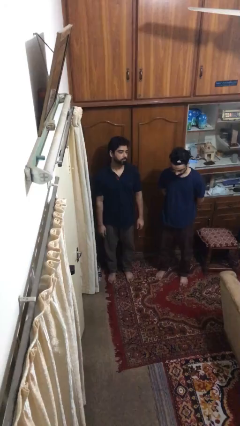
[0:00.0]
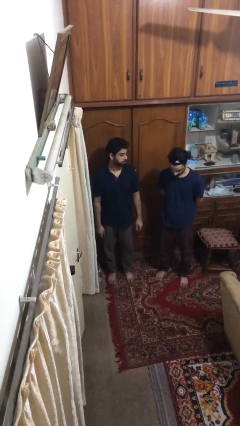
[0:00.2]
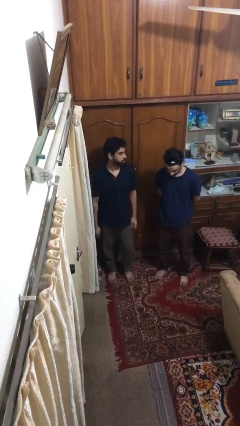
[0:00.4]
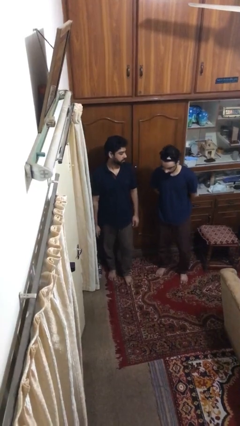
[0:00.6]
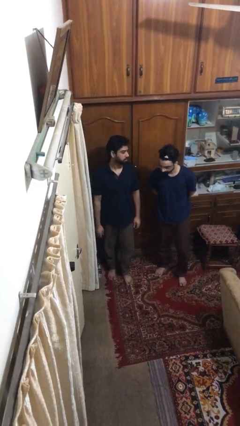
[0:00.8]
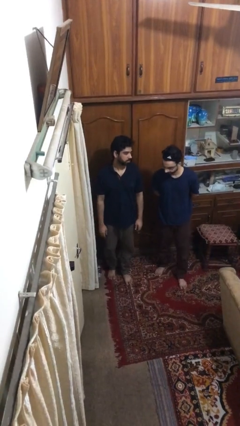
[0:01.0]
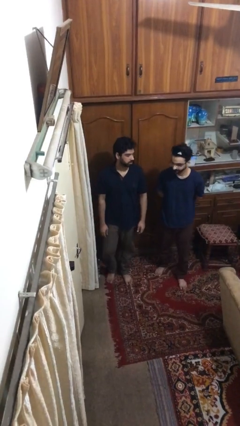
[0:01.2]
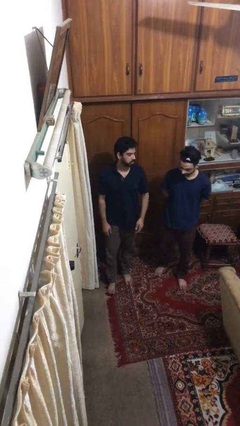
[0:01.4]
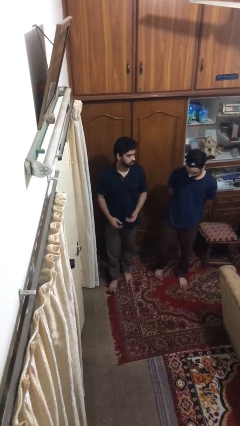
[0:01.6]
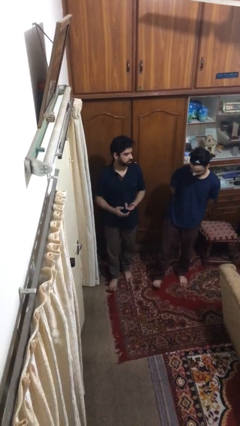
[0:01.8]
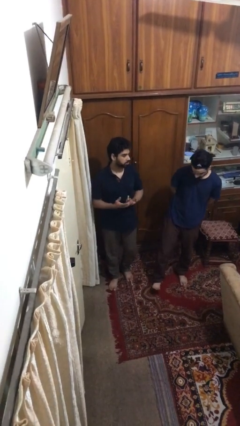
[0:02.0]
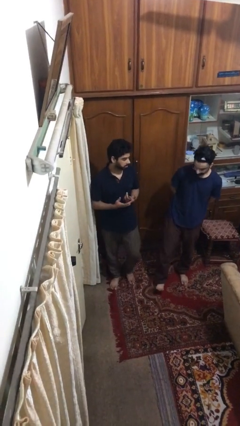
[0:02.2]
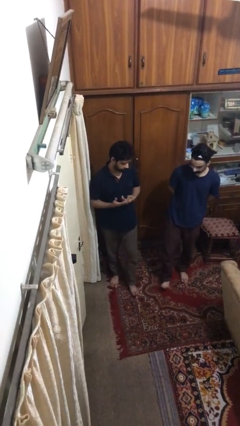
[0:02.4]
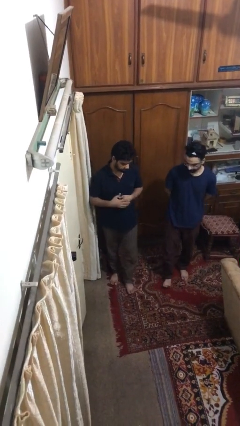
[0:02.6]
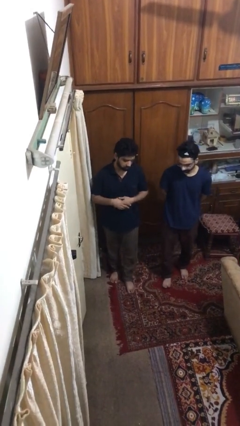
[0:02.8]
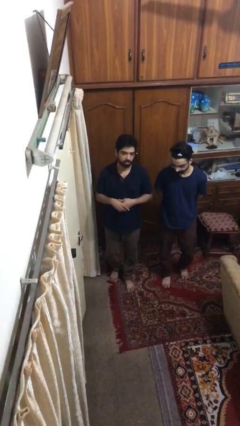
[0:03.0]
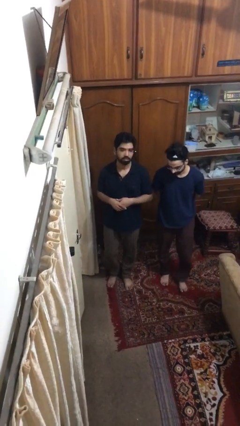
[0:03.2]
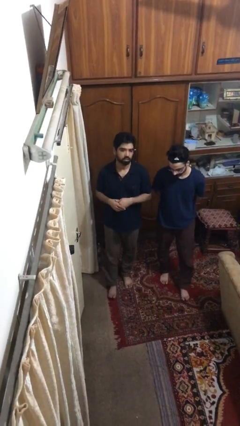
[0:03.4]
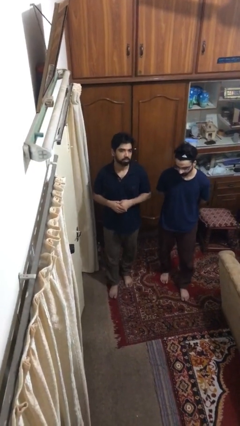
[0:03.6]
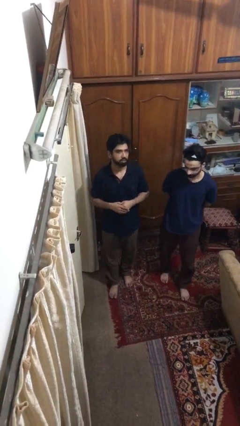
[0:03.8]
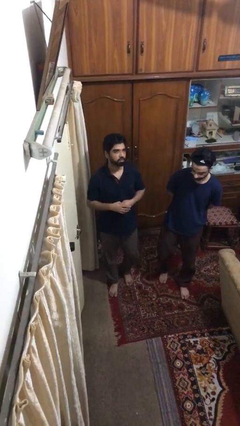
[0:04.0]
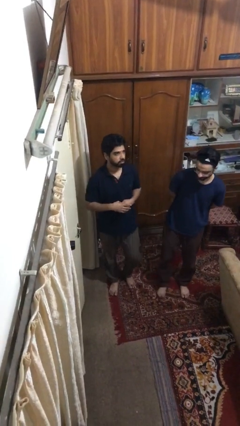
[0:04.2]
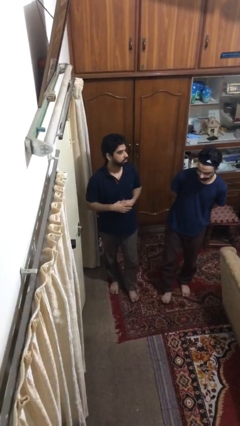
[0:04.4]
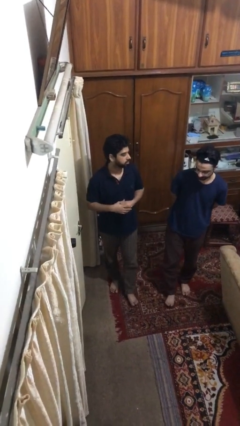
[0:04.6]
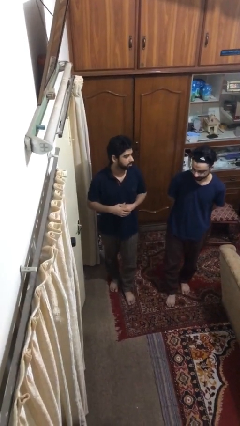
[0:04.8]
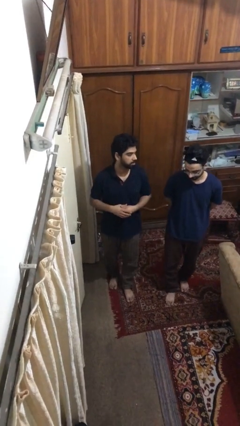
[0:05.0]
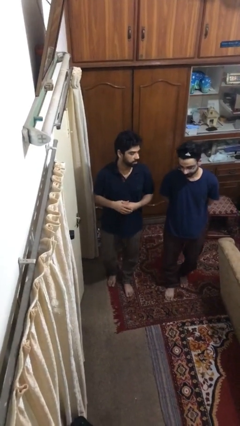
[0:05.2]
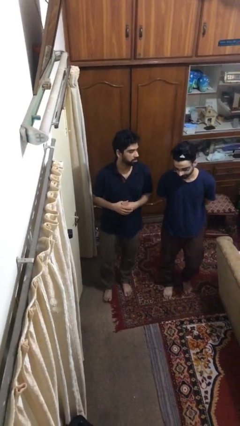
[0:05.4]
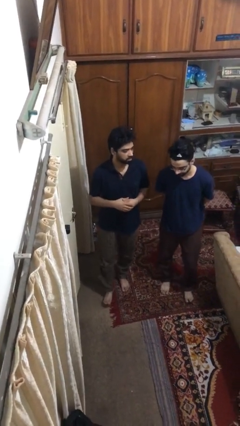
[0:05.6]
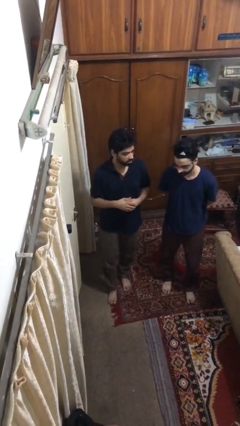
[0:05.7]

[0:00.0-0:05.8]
person talks to person

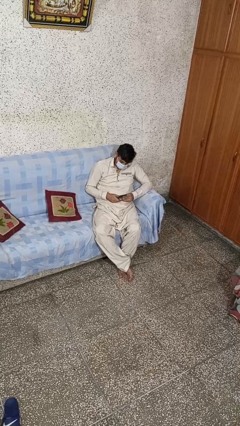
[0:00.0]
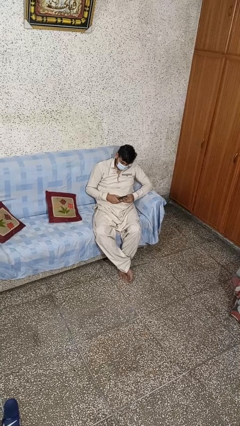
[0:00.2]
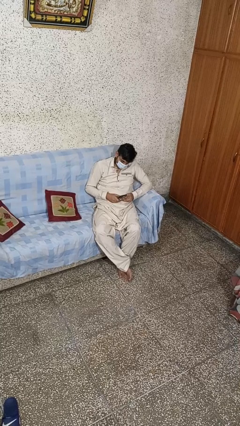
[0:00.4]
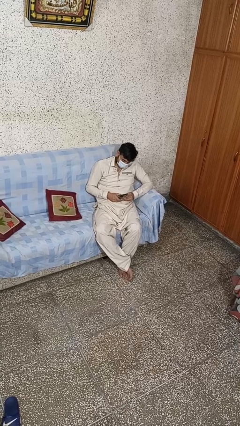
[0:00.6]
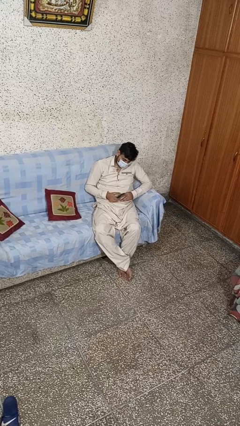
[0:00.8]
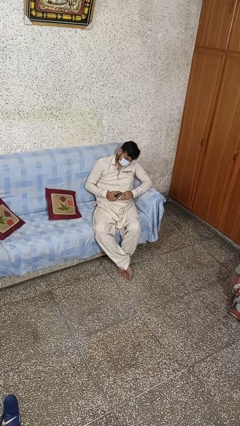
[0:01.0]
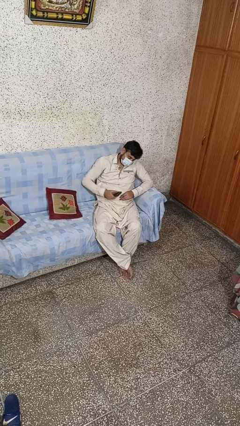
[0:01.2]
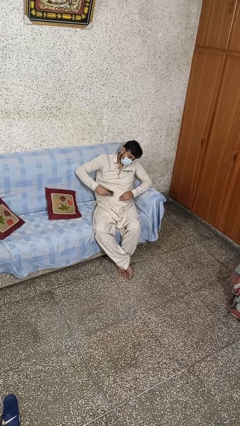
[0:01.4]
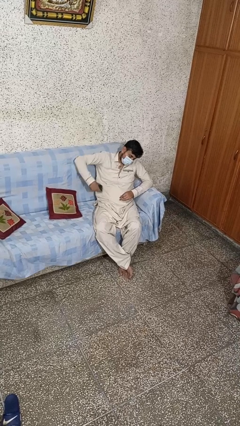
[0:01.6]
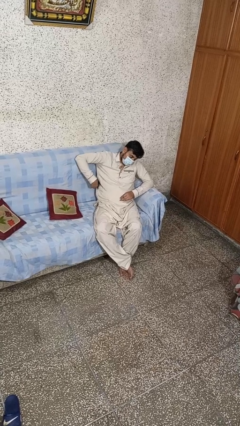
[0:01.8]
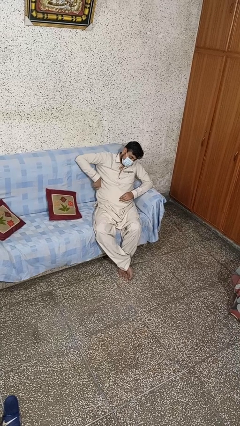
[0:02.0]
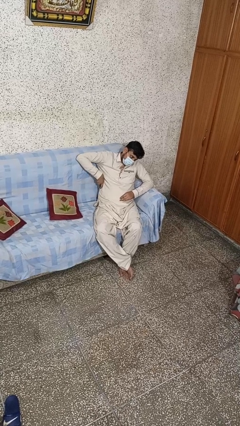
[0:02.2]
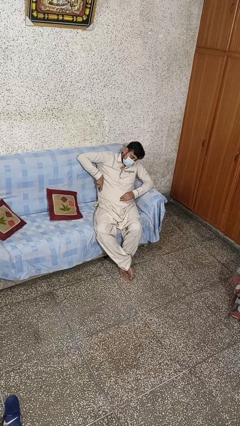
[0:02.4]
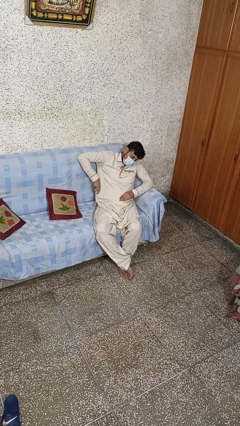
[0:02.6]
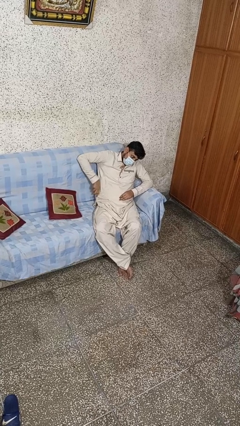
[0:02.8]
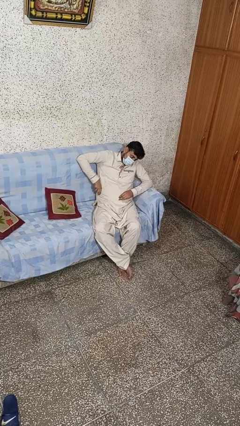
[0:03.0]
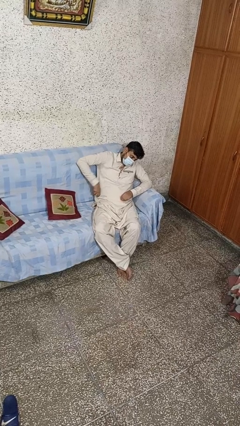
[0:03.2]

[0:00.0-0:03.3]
person puts phone into pocket

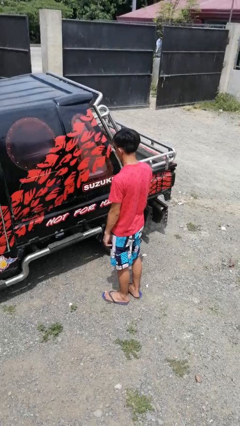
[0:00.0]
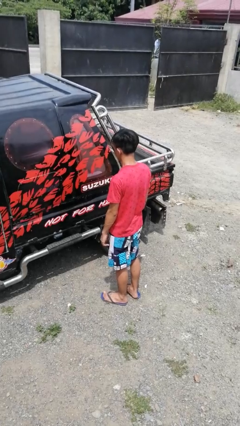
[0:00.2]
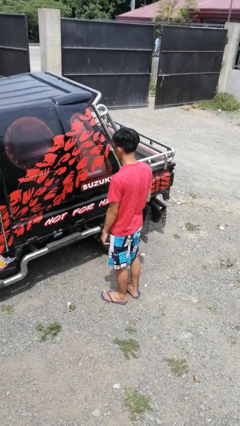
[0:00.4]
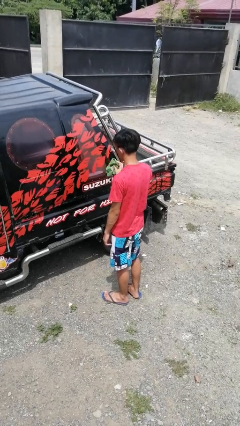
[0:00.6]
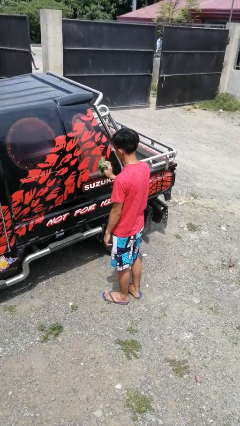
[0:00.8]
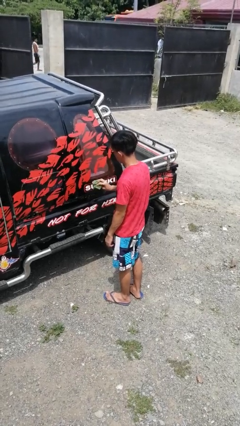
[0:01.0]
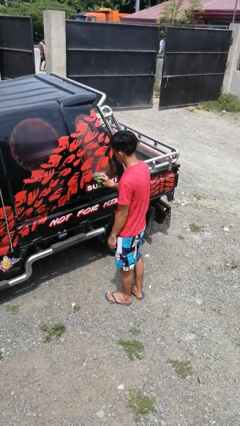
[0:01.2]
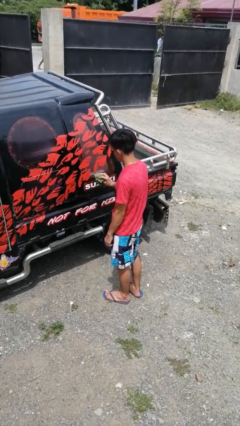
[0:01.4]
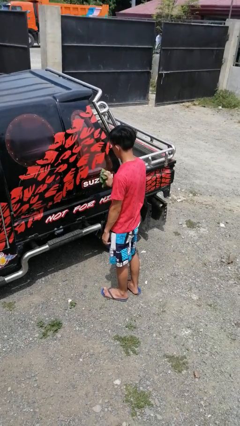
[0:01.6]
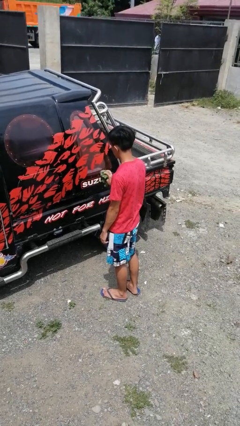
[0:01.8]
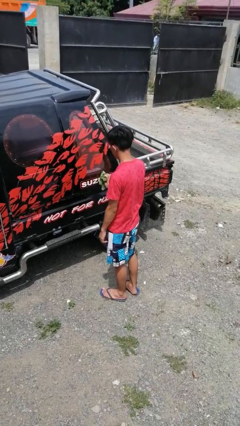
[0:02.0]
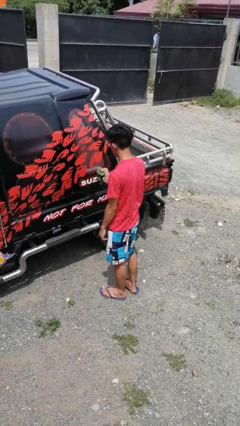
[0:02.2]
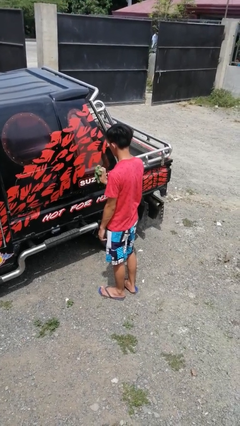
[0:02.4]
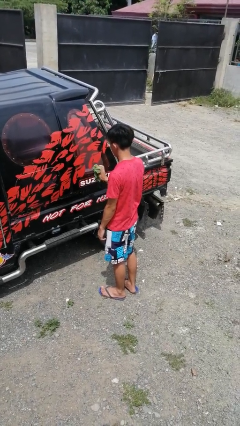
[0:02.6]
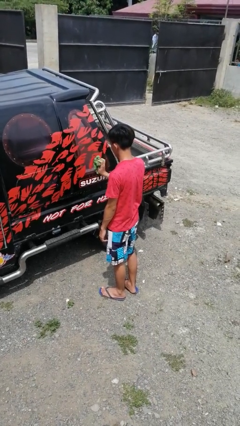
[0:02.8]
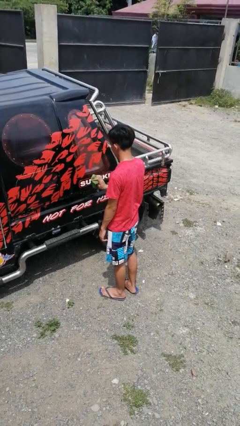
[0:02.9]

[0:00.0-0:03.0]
person polishes car with rag

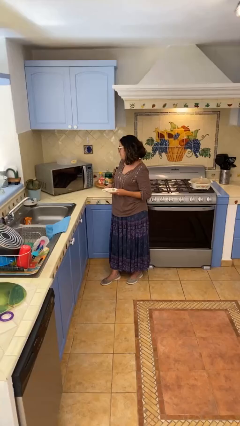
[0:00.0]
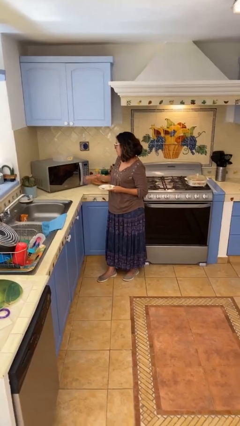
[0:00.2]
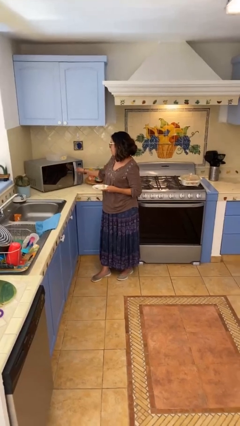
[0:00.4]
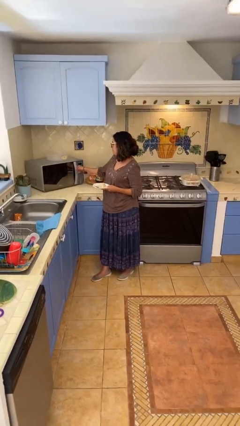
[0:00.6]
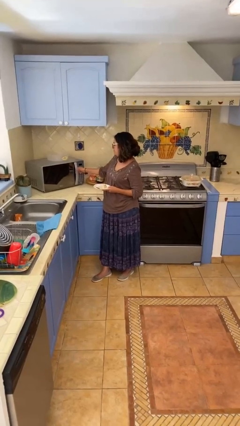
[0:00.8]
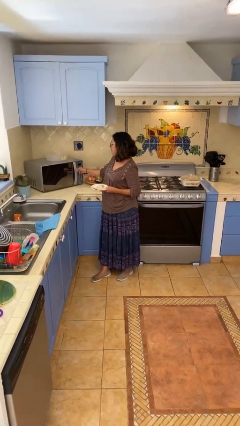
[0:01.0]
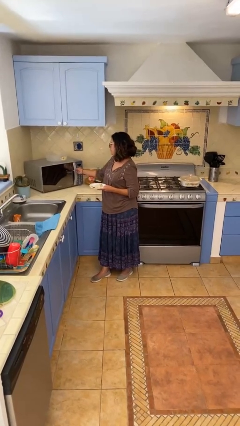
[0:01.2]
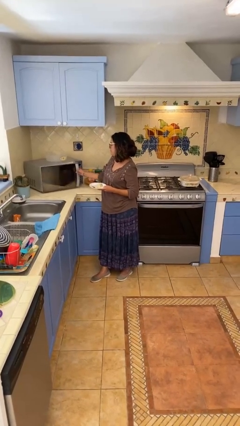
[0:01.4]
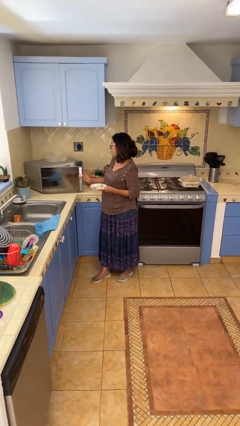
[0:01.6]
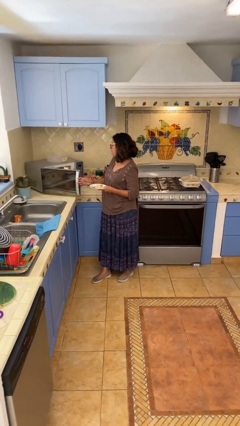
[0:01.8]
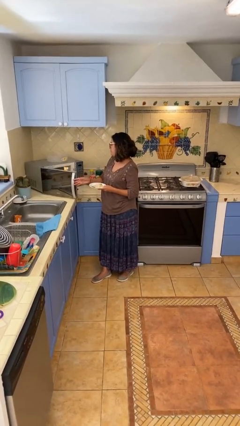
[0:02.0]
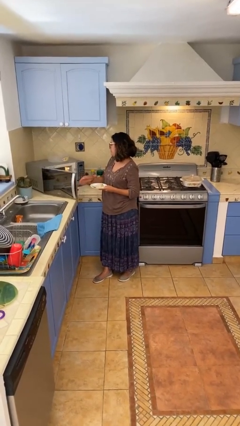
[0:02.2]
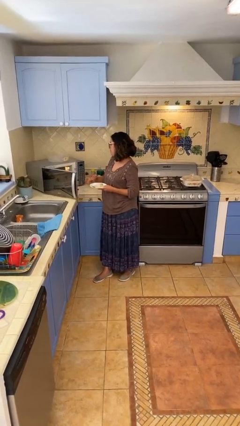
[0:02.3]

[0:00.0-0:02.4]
person opens microwave

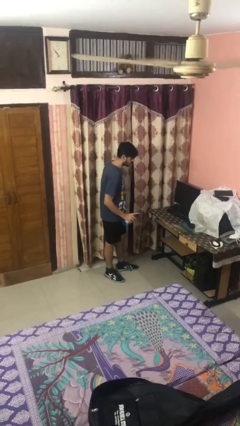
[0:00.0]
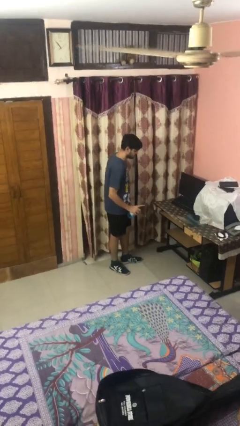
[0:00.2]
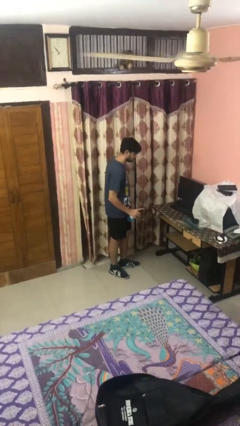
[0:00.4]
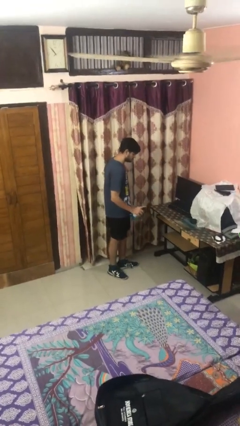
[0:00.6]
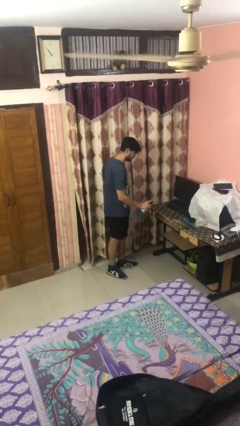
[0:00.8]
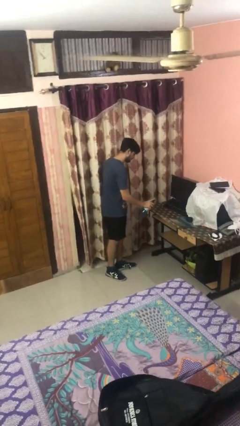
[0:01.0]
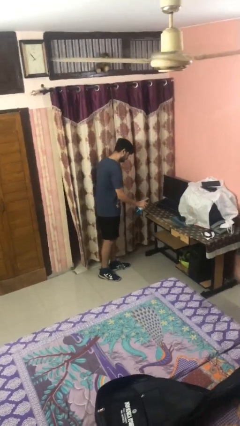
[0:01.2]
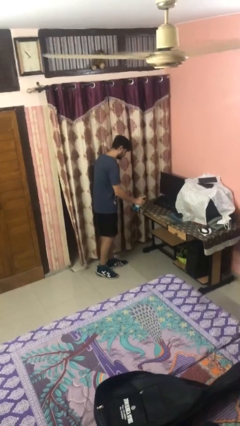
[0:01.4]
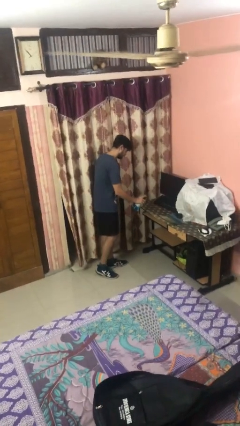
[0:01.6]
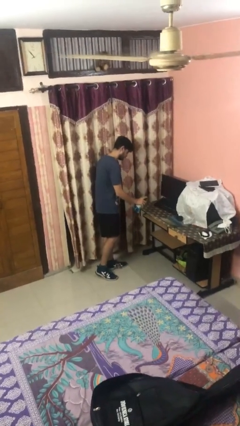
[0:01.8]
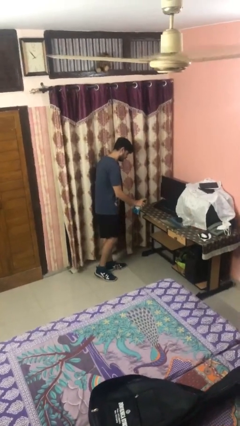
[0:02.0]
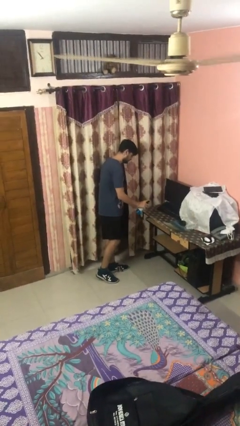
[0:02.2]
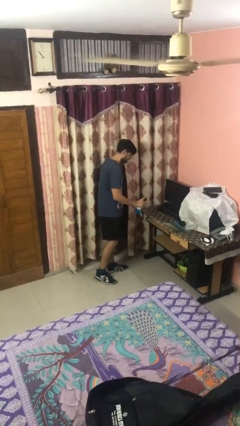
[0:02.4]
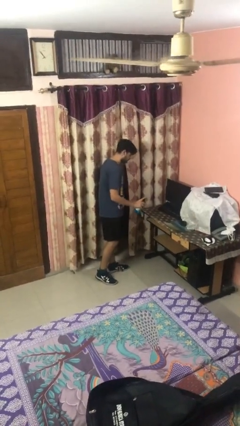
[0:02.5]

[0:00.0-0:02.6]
person sprays from bottle

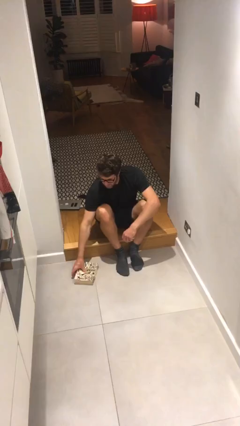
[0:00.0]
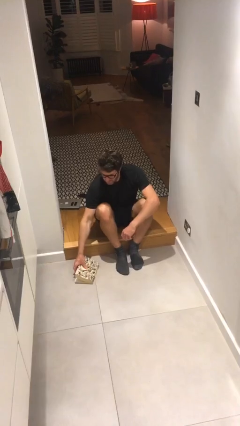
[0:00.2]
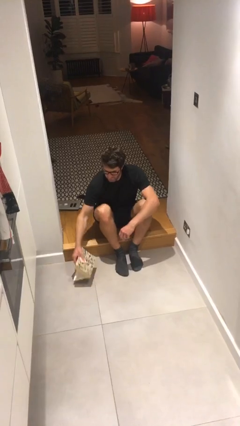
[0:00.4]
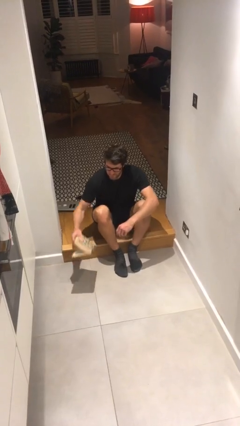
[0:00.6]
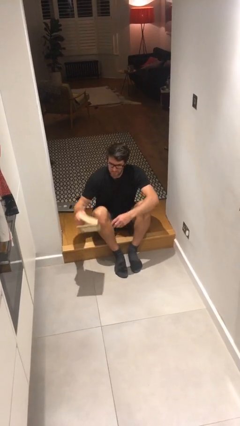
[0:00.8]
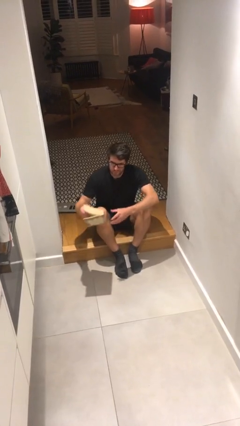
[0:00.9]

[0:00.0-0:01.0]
person picks up object from floor
